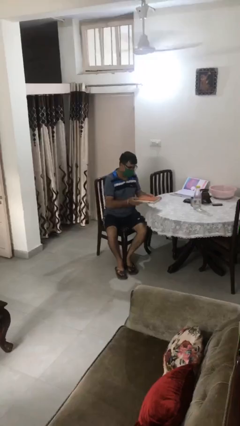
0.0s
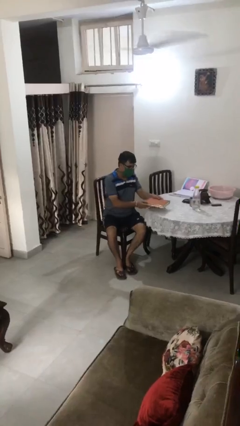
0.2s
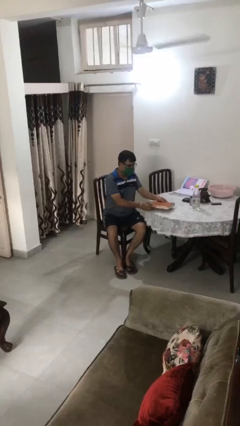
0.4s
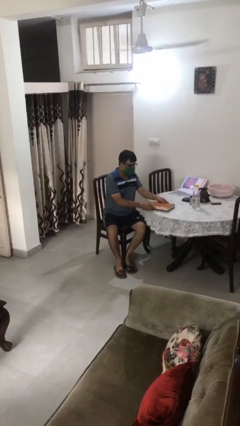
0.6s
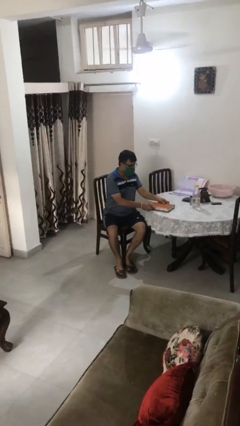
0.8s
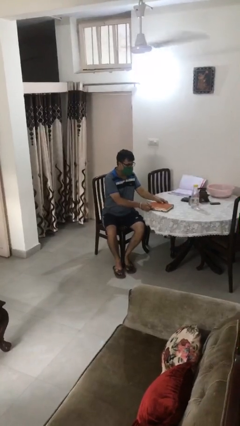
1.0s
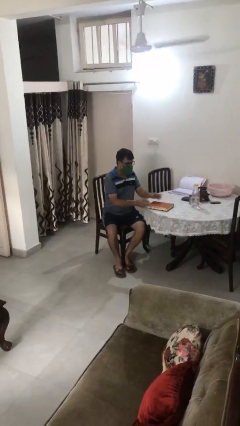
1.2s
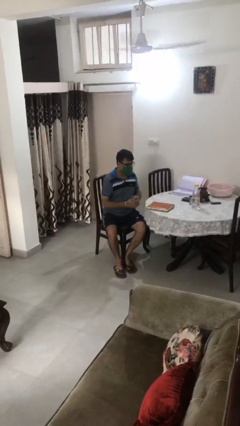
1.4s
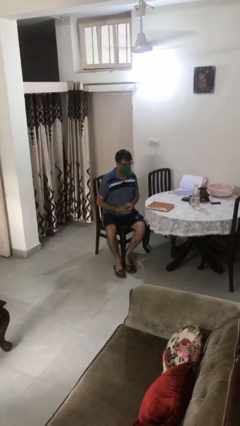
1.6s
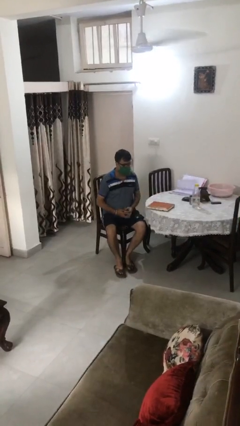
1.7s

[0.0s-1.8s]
person puts down object on table

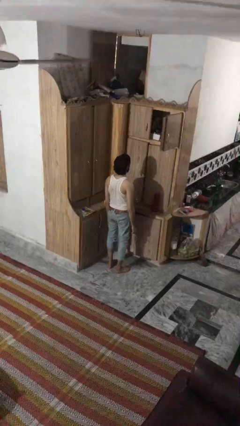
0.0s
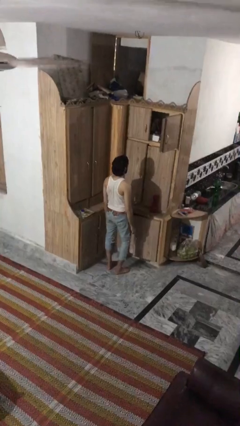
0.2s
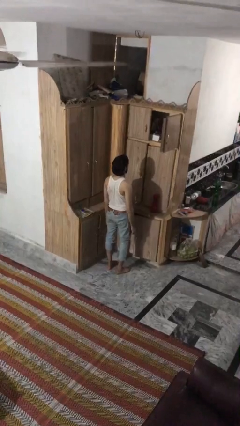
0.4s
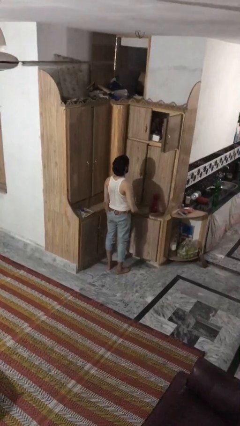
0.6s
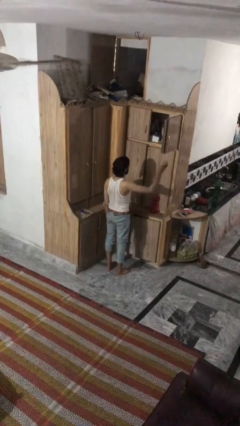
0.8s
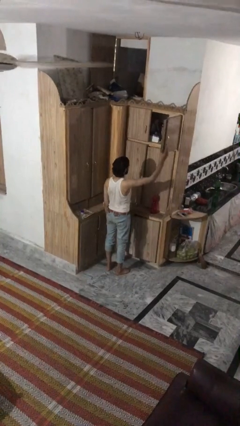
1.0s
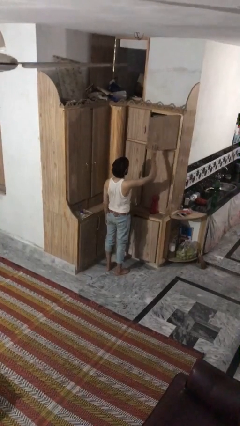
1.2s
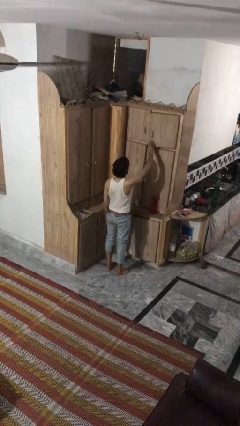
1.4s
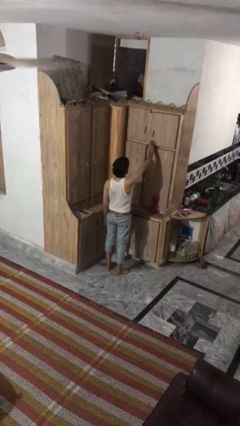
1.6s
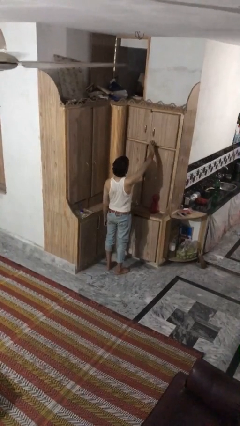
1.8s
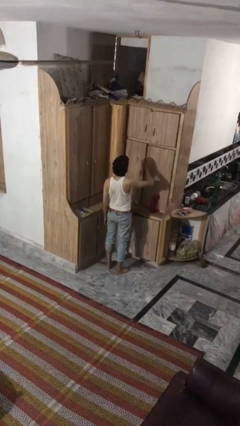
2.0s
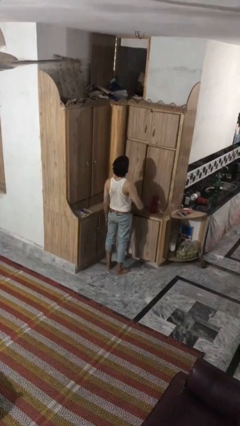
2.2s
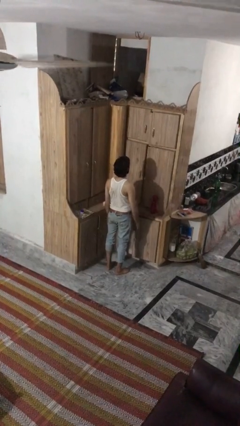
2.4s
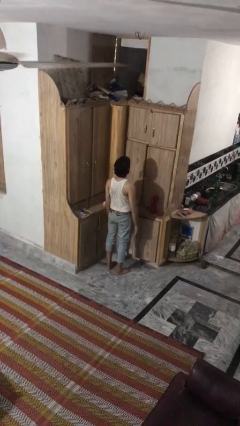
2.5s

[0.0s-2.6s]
person closes cabinet

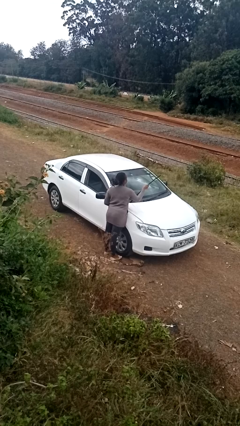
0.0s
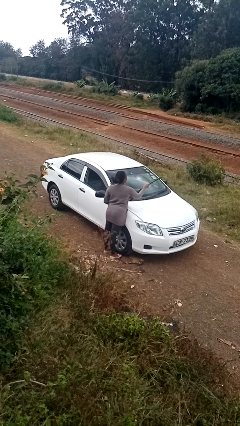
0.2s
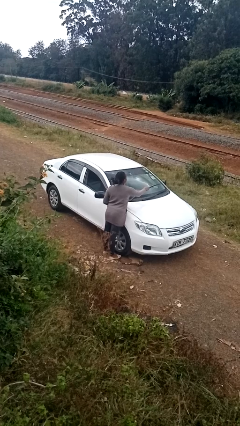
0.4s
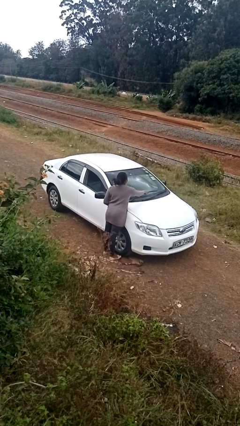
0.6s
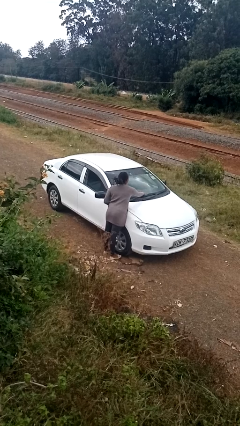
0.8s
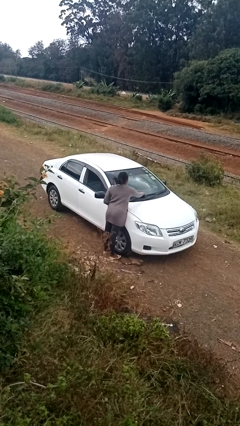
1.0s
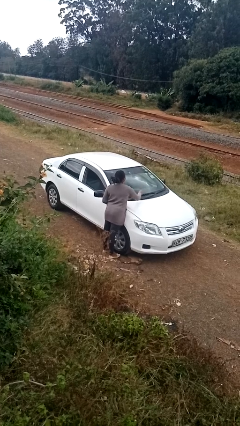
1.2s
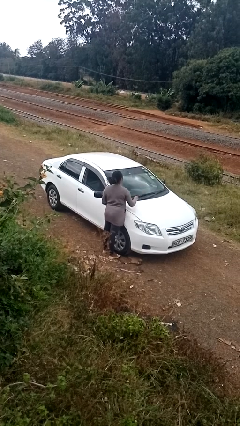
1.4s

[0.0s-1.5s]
person flips down car wipers

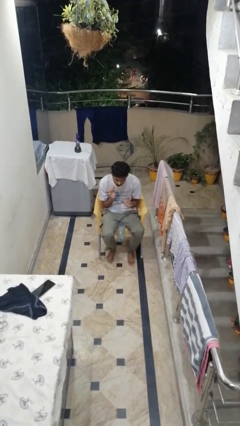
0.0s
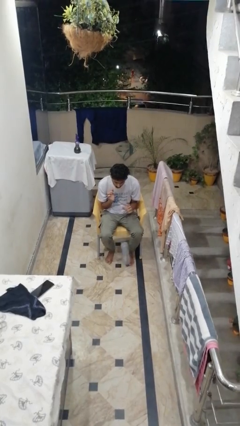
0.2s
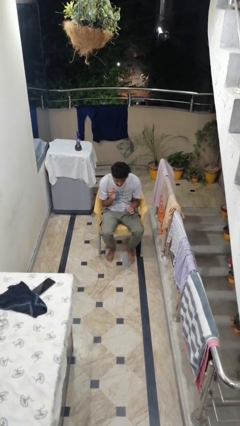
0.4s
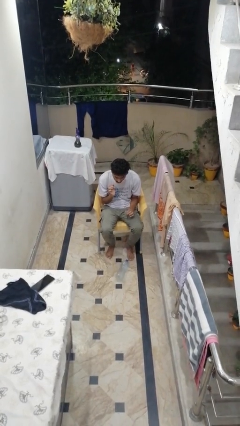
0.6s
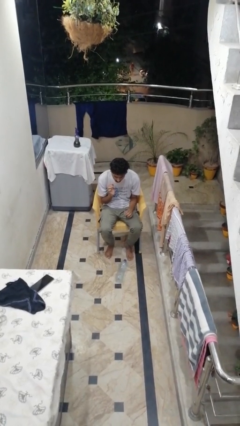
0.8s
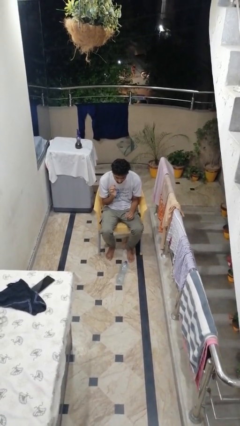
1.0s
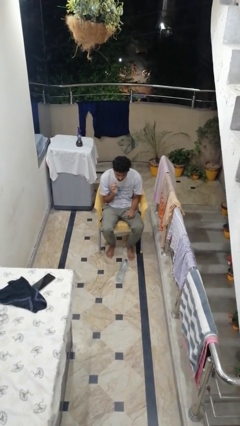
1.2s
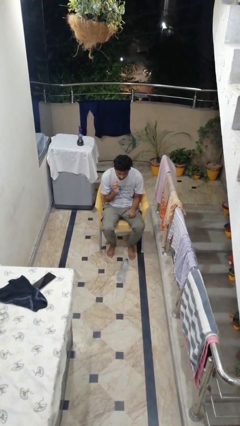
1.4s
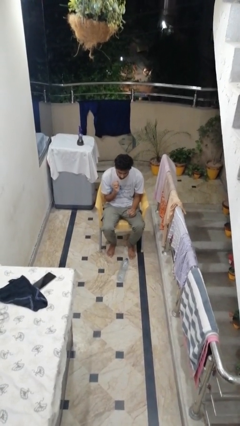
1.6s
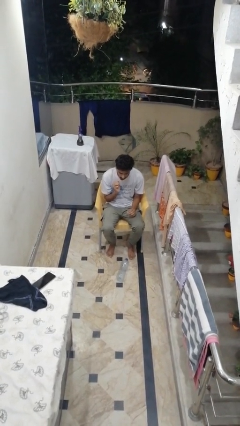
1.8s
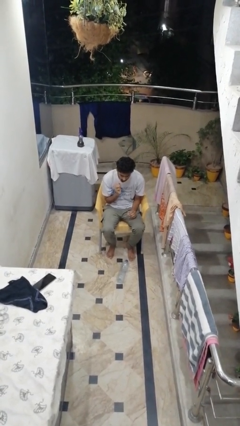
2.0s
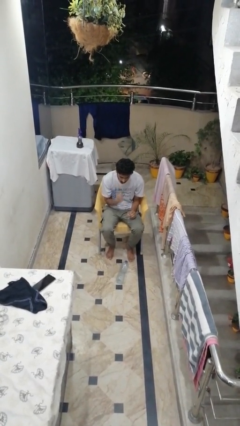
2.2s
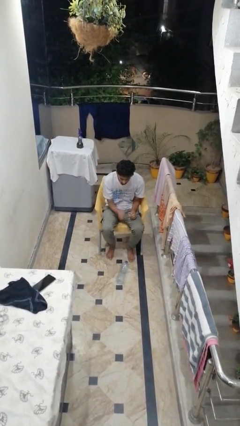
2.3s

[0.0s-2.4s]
person drops object

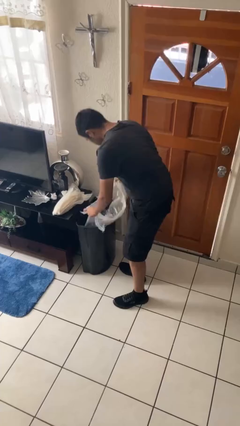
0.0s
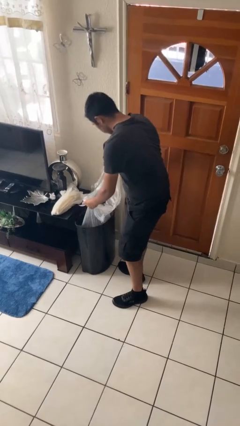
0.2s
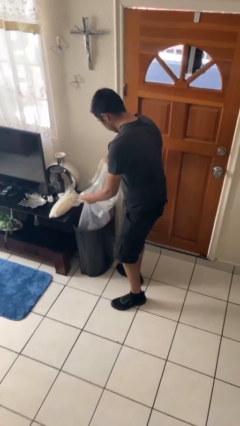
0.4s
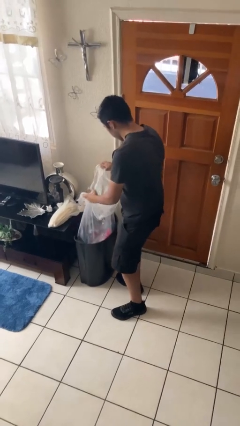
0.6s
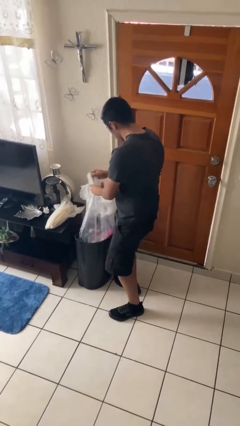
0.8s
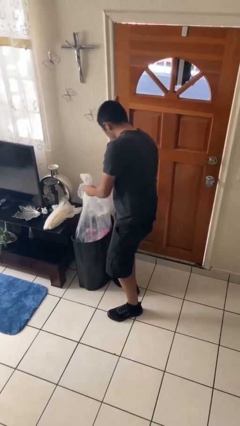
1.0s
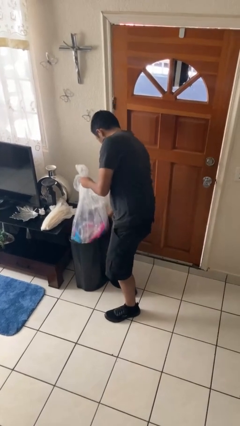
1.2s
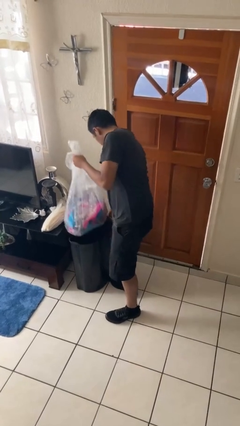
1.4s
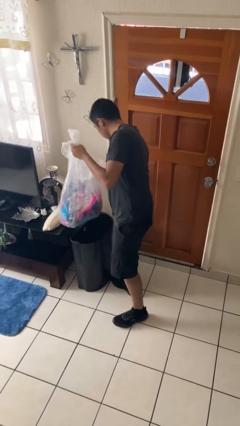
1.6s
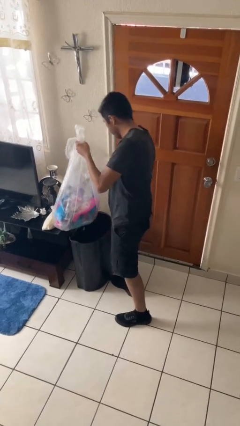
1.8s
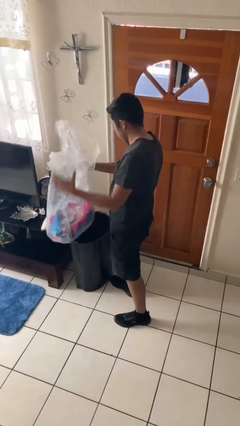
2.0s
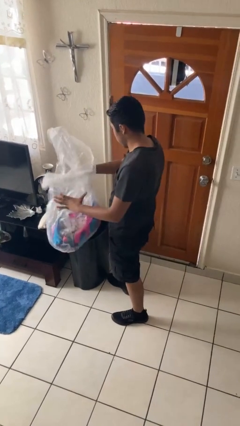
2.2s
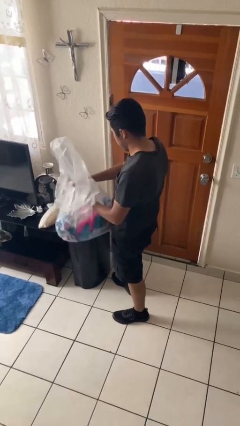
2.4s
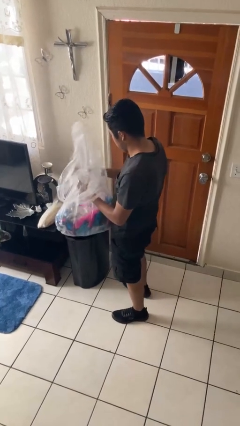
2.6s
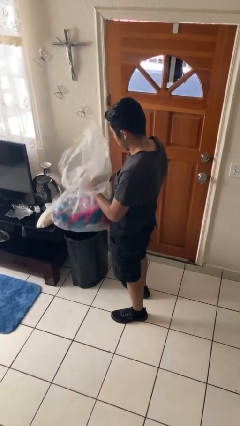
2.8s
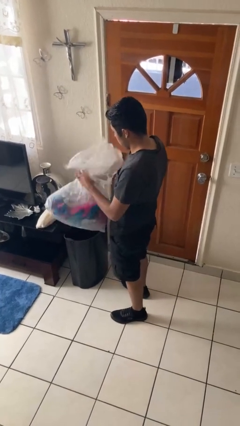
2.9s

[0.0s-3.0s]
person removes trashbag from trashcan

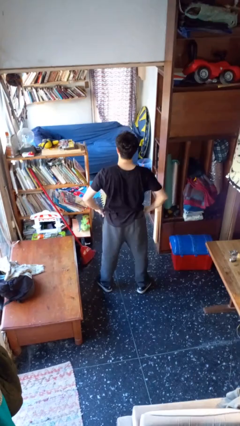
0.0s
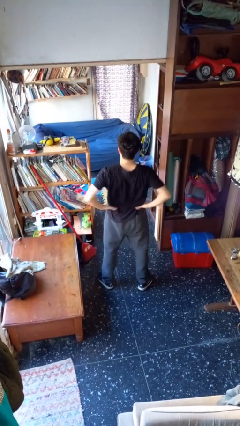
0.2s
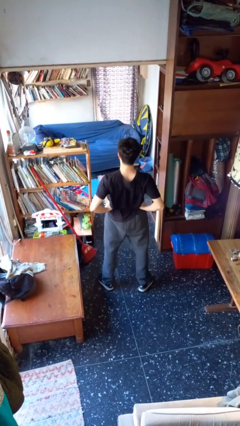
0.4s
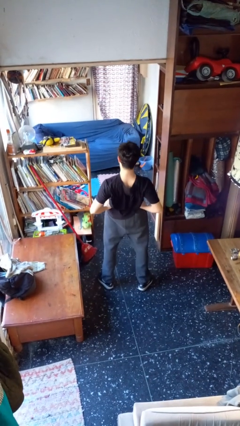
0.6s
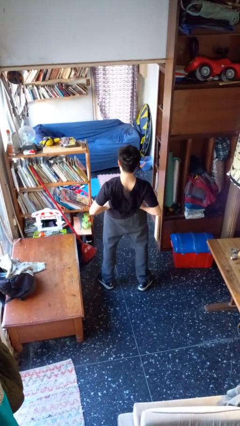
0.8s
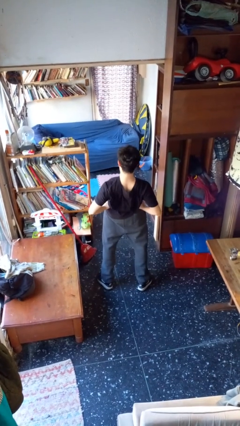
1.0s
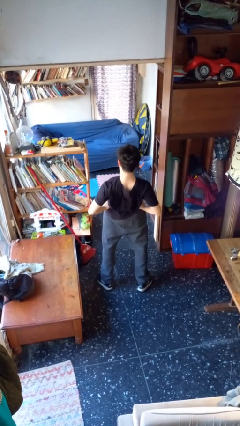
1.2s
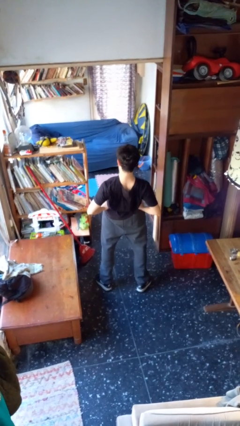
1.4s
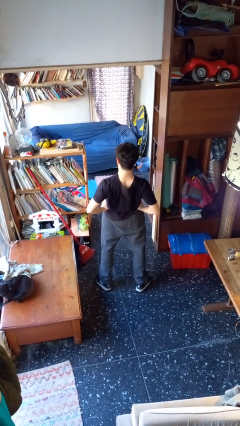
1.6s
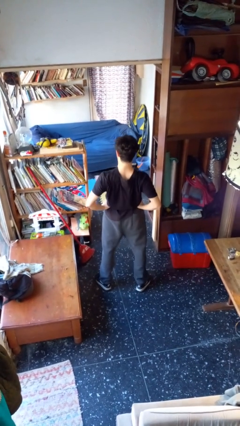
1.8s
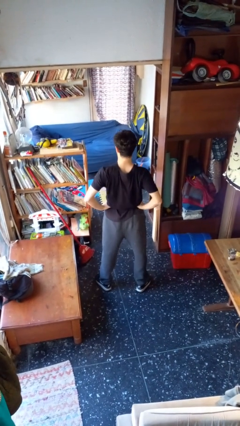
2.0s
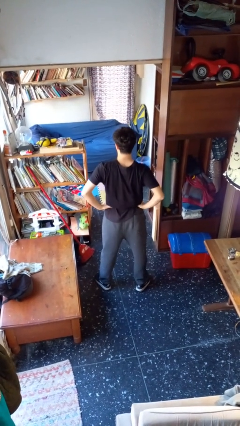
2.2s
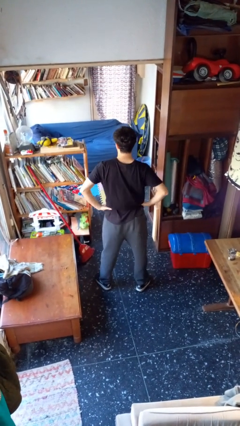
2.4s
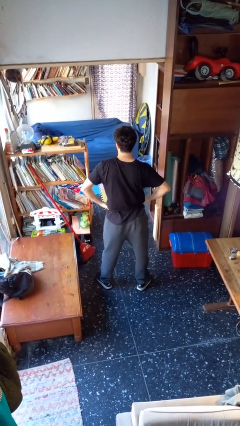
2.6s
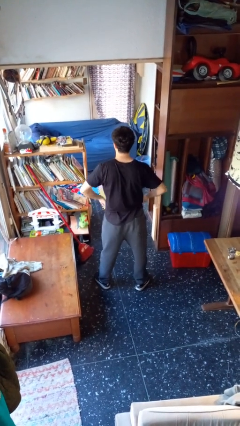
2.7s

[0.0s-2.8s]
person stretches back

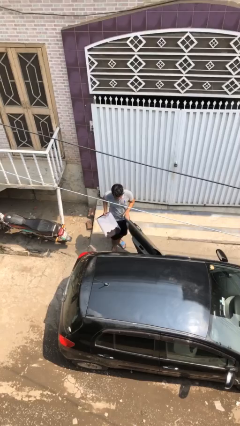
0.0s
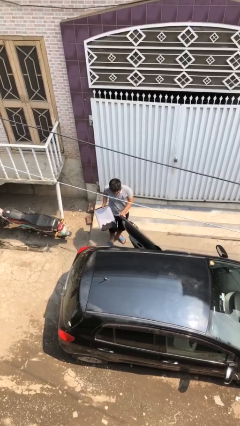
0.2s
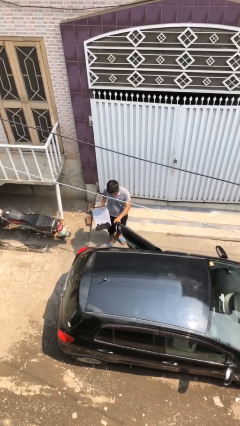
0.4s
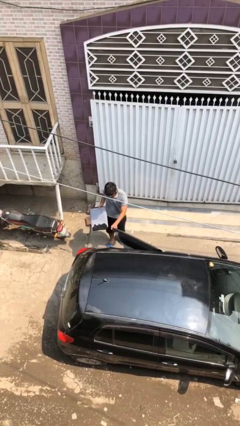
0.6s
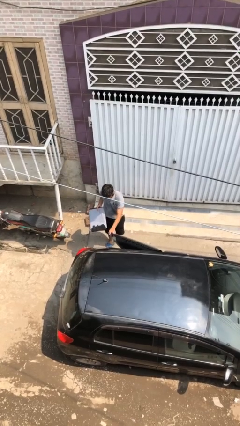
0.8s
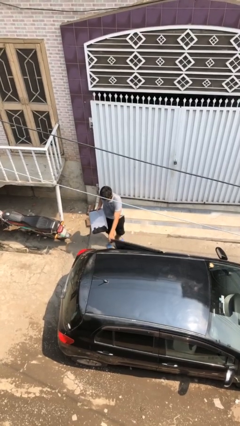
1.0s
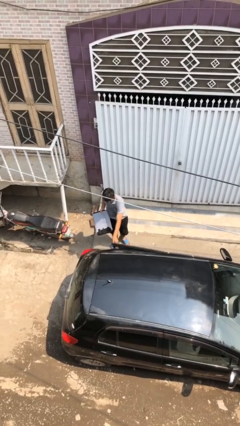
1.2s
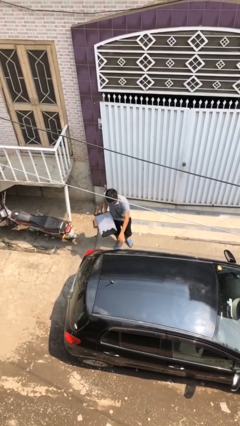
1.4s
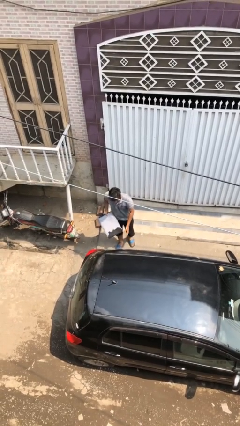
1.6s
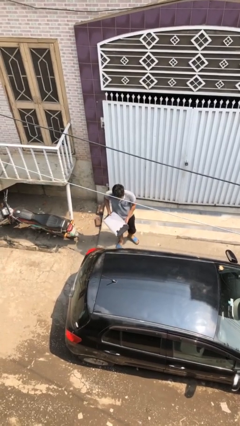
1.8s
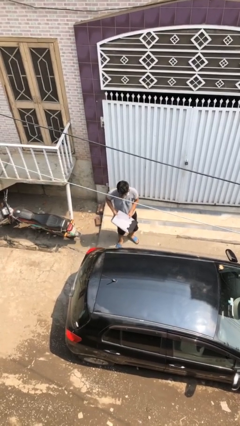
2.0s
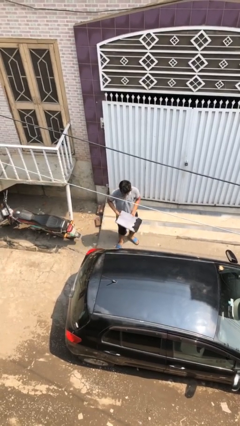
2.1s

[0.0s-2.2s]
person closes car door

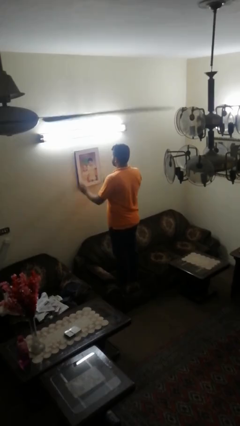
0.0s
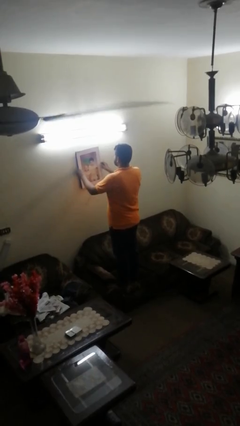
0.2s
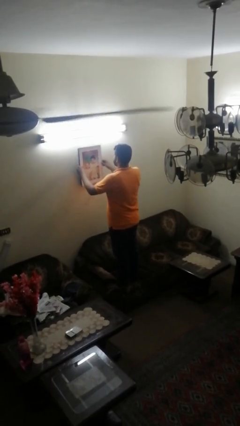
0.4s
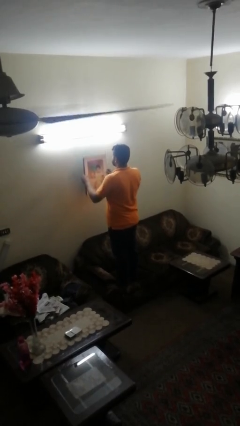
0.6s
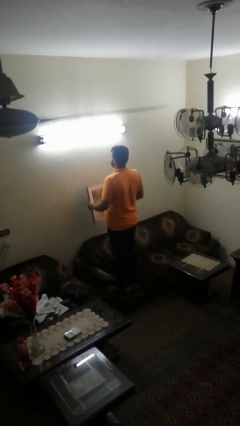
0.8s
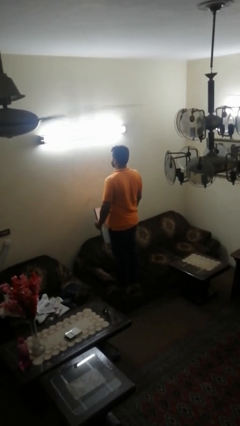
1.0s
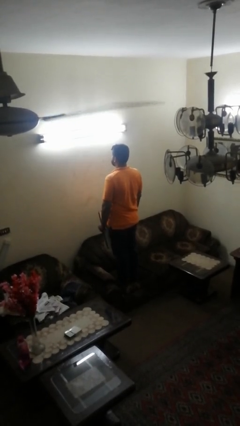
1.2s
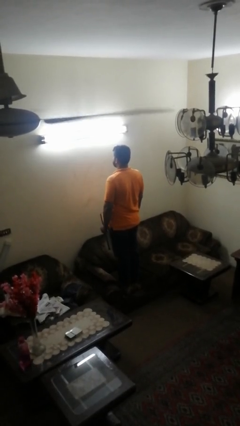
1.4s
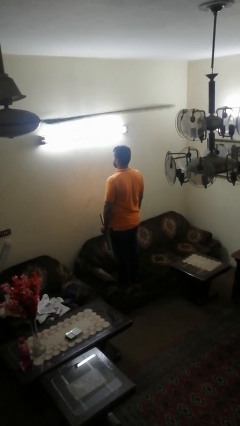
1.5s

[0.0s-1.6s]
person takes down picture frame
